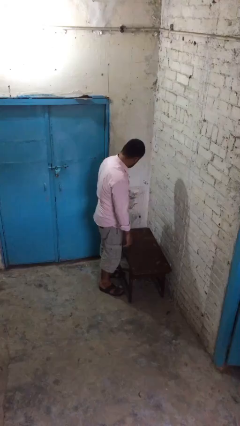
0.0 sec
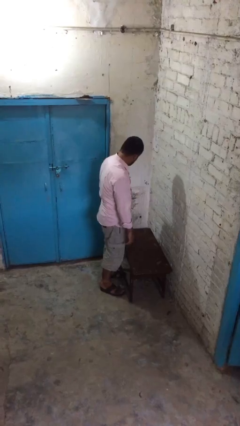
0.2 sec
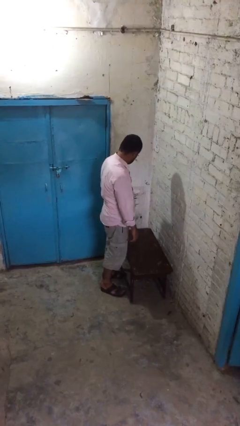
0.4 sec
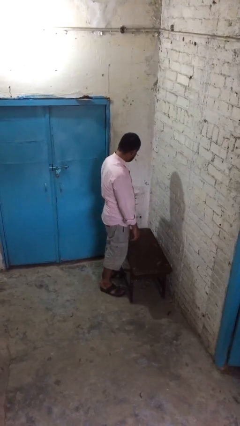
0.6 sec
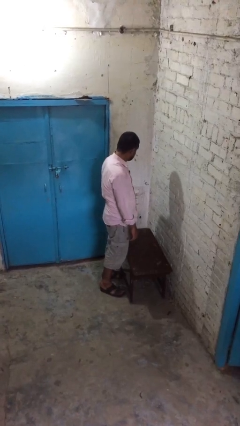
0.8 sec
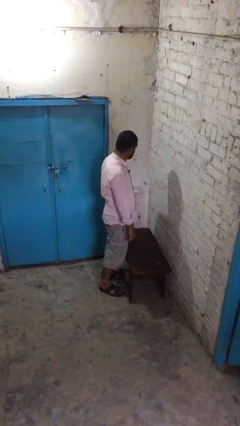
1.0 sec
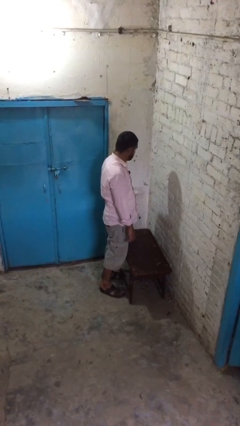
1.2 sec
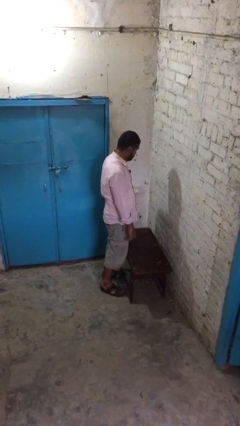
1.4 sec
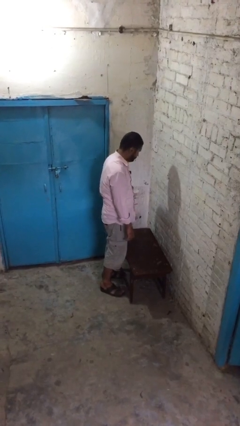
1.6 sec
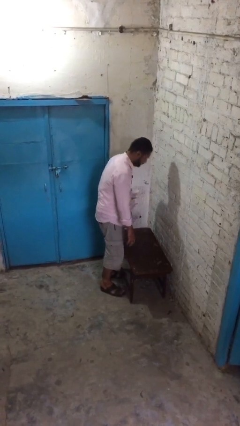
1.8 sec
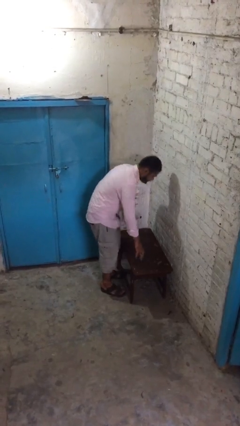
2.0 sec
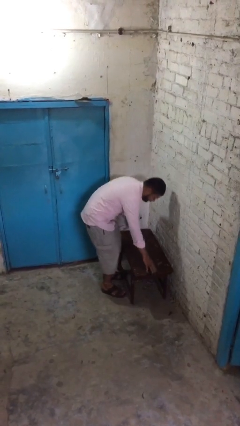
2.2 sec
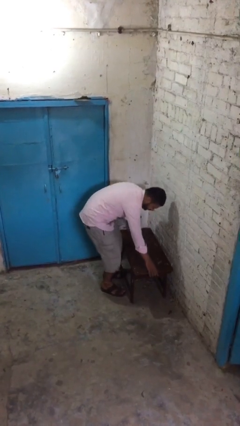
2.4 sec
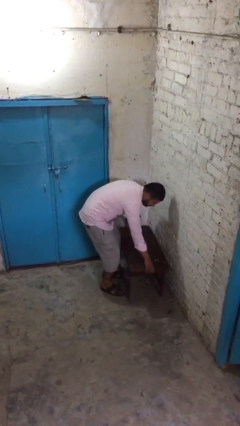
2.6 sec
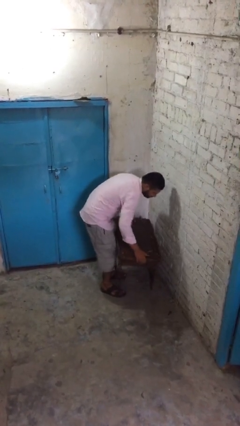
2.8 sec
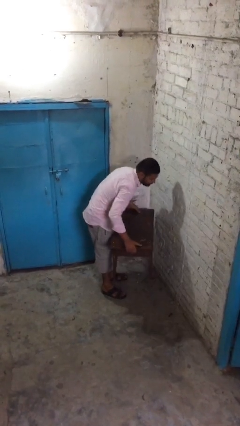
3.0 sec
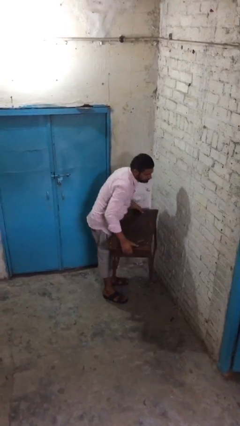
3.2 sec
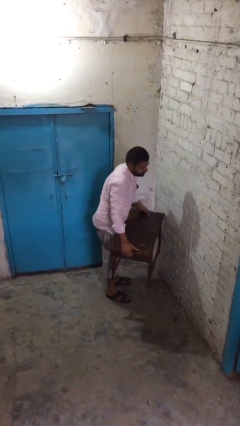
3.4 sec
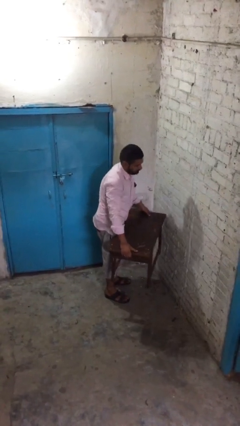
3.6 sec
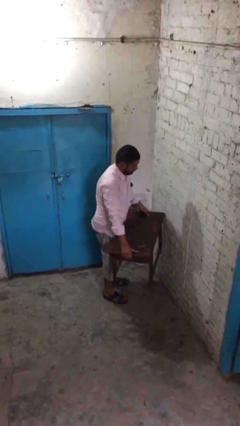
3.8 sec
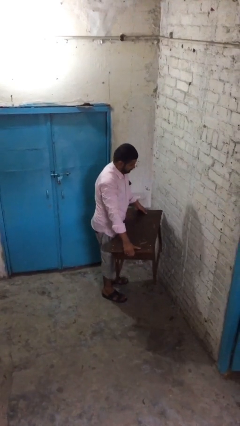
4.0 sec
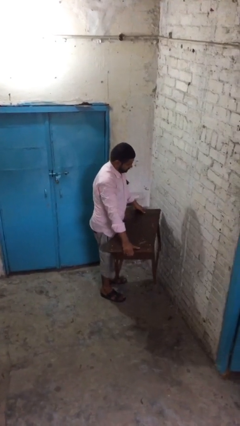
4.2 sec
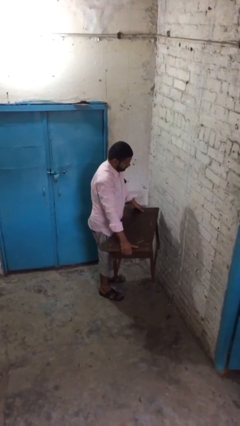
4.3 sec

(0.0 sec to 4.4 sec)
person picks up object from floor

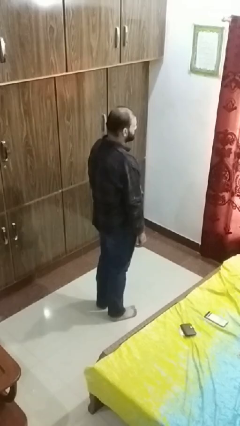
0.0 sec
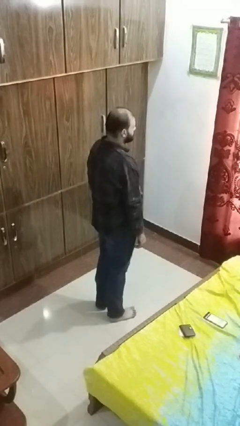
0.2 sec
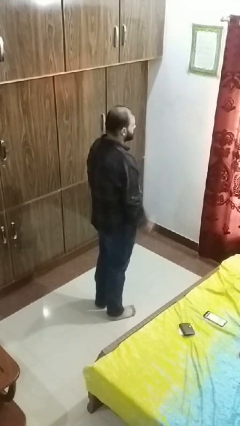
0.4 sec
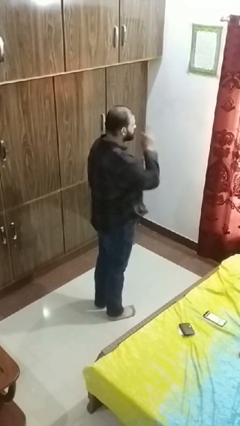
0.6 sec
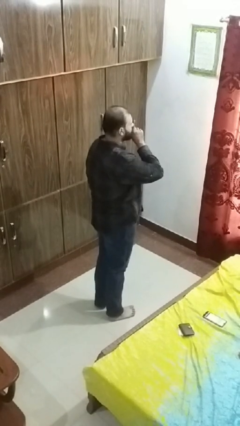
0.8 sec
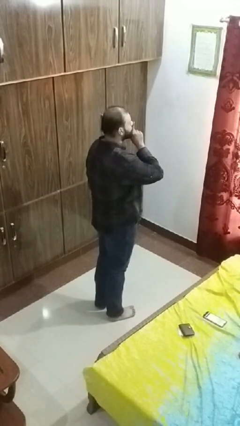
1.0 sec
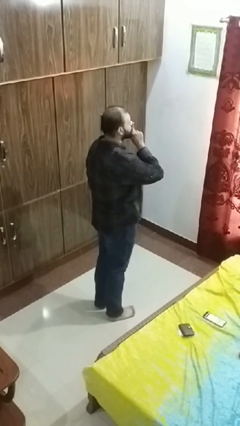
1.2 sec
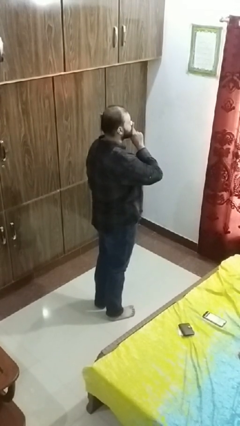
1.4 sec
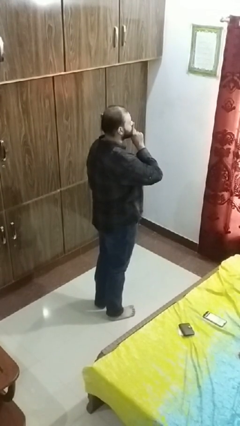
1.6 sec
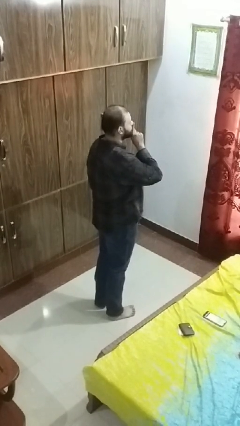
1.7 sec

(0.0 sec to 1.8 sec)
person gestures be quiet

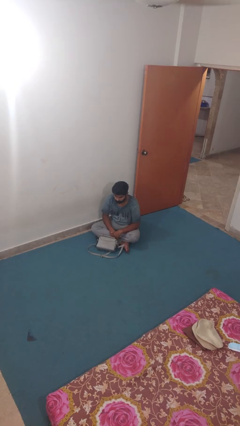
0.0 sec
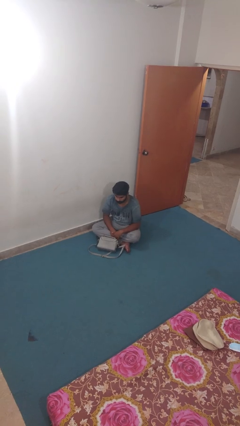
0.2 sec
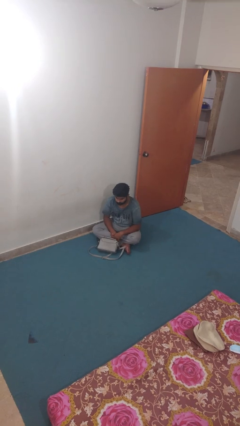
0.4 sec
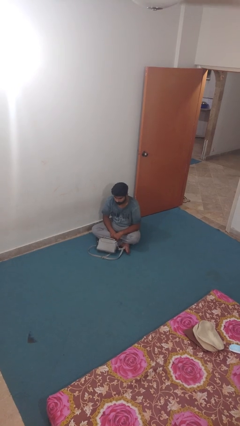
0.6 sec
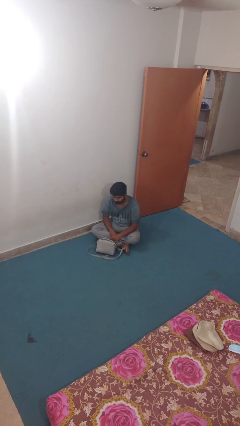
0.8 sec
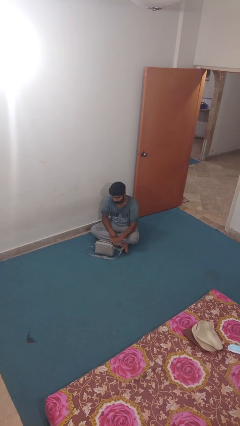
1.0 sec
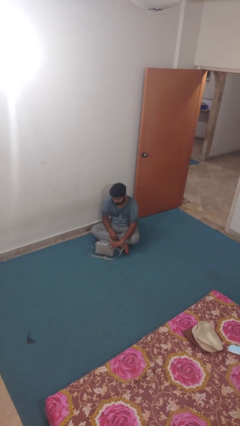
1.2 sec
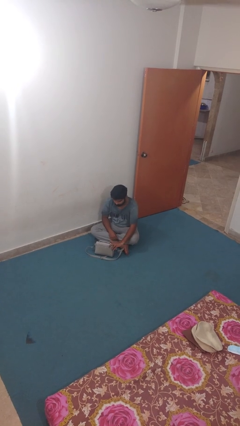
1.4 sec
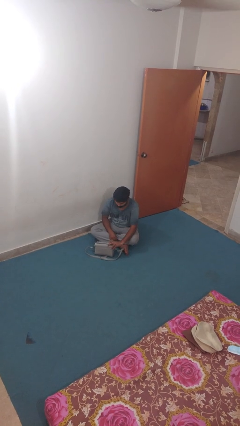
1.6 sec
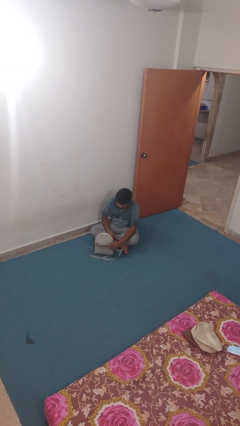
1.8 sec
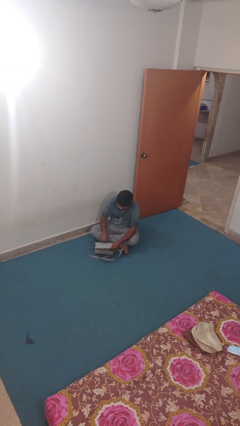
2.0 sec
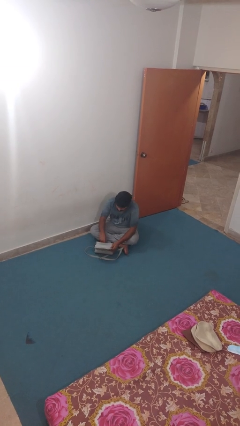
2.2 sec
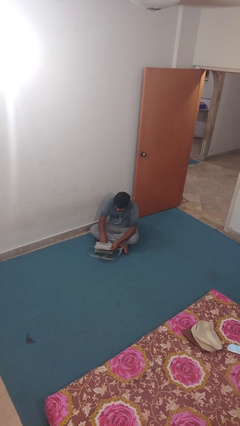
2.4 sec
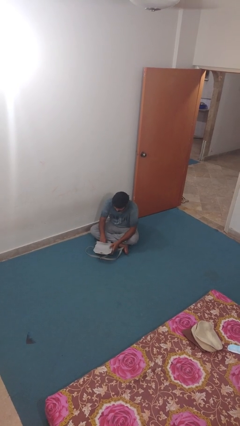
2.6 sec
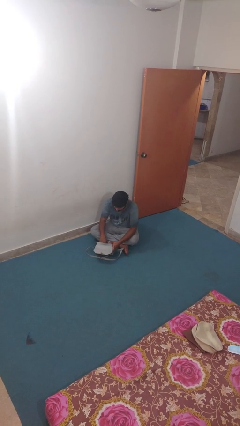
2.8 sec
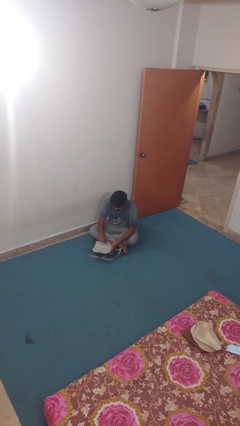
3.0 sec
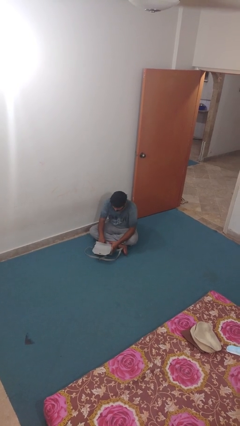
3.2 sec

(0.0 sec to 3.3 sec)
person searches in purse

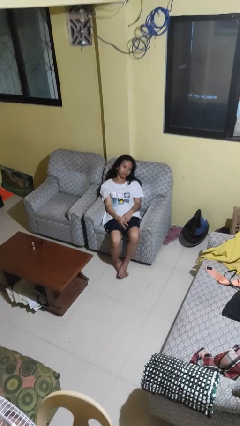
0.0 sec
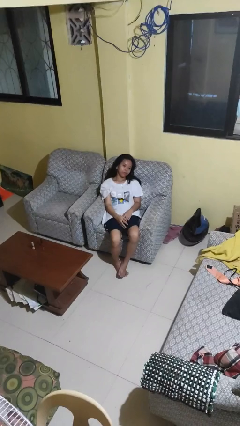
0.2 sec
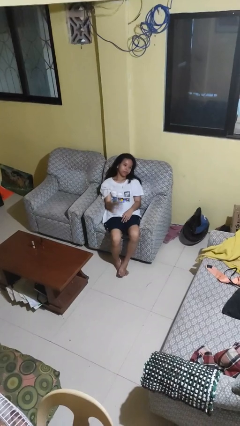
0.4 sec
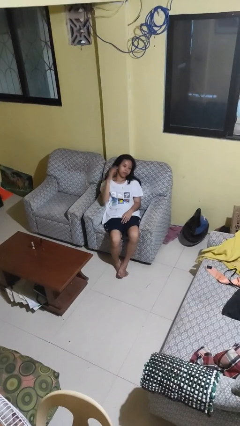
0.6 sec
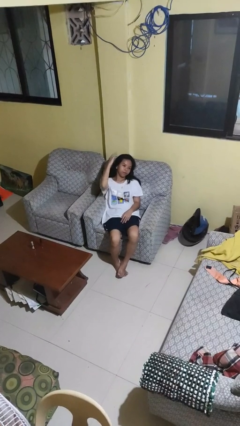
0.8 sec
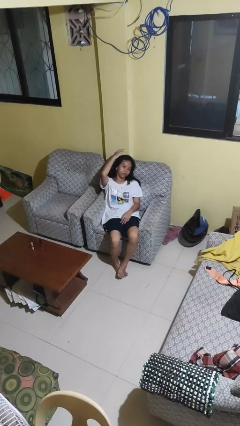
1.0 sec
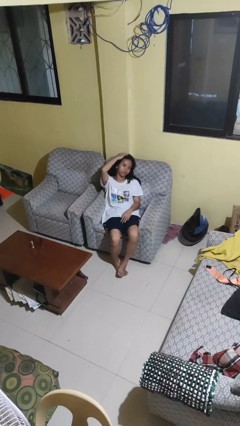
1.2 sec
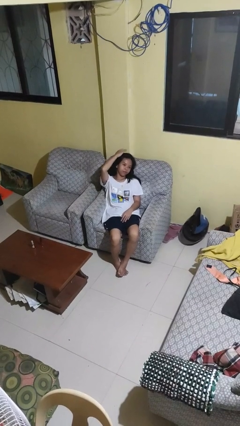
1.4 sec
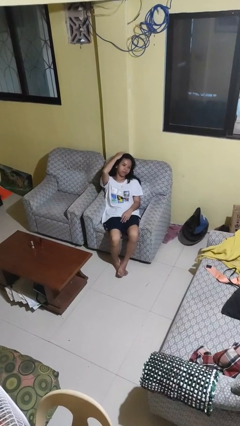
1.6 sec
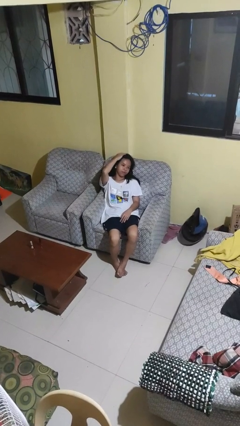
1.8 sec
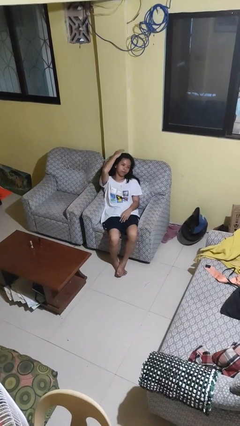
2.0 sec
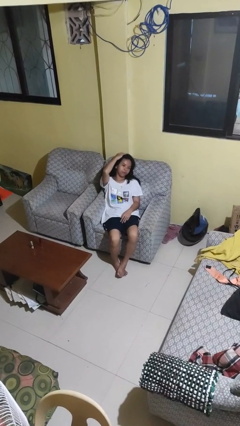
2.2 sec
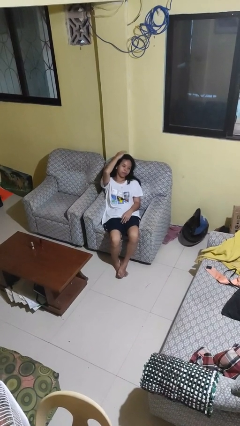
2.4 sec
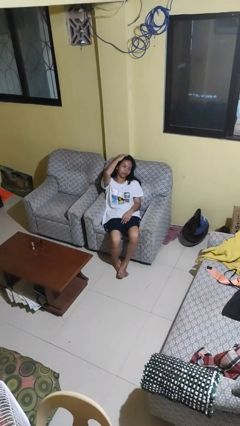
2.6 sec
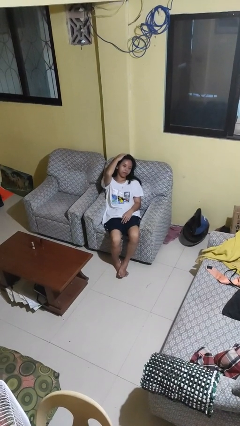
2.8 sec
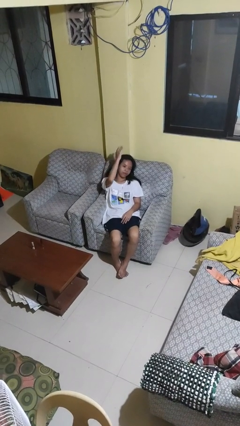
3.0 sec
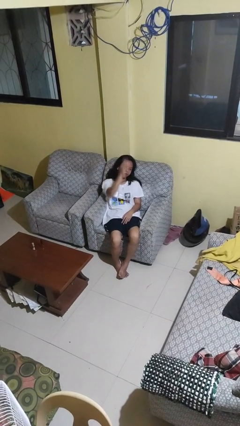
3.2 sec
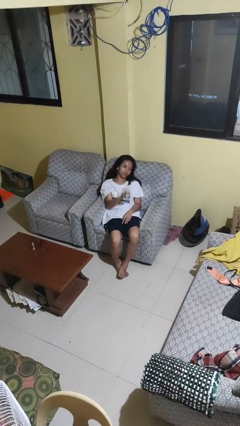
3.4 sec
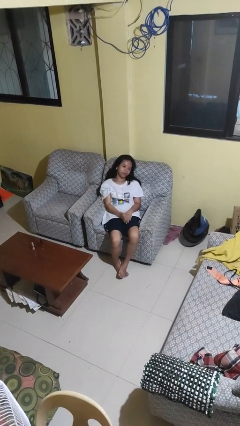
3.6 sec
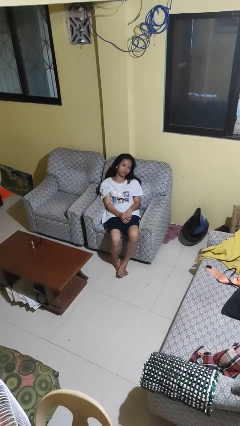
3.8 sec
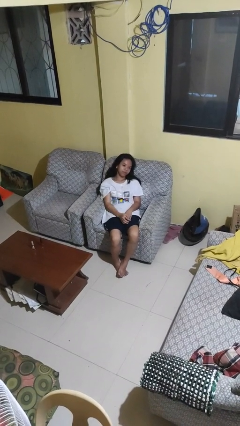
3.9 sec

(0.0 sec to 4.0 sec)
person pats head

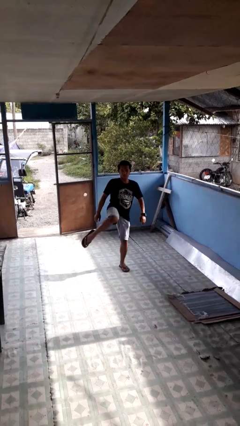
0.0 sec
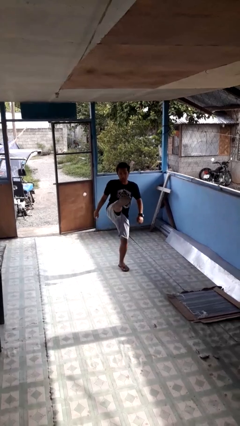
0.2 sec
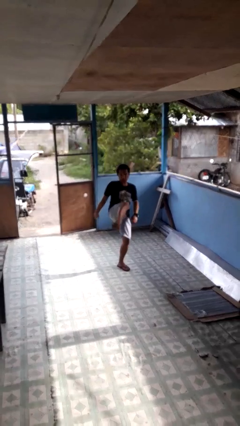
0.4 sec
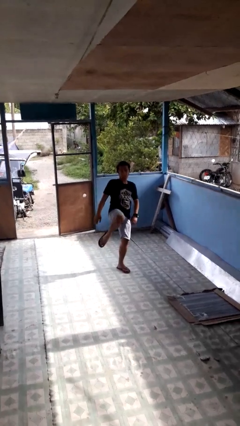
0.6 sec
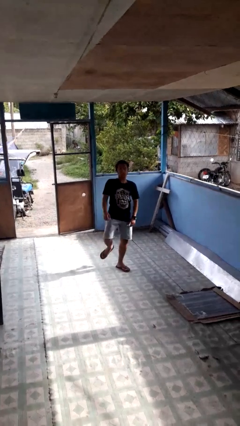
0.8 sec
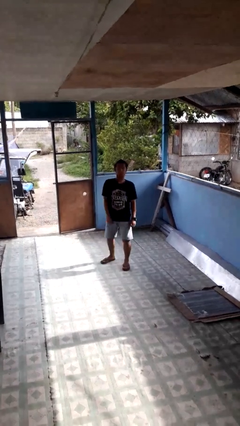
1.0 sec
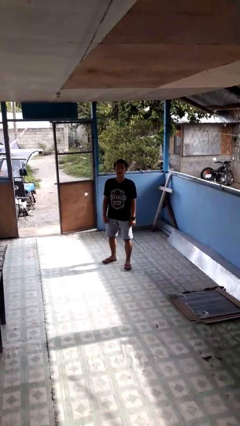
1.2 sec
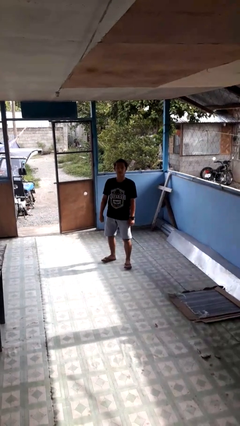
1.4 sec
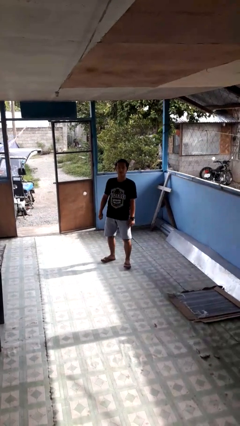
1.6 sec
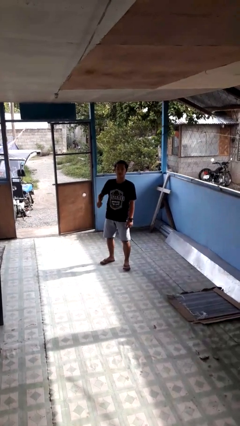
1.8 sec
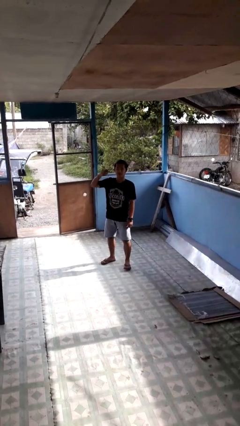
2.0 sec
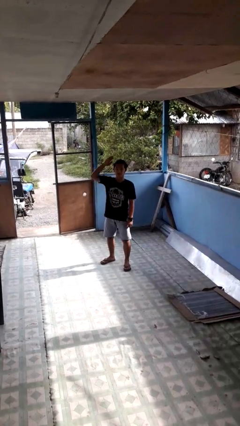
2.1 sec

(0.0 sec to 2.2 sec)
person karate kicks

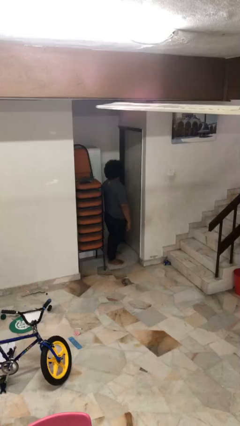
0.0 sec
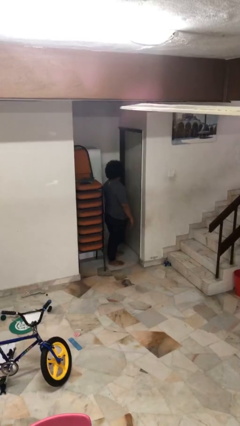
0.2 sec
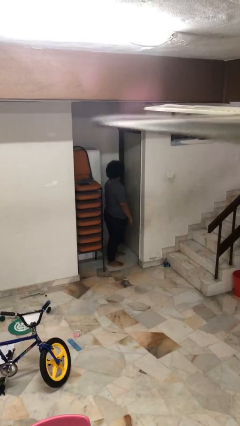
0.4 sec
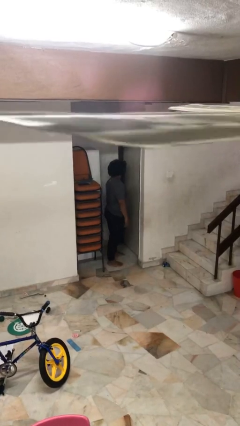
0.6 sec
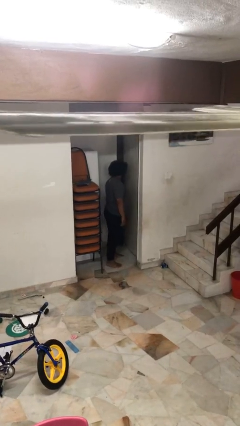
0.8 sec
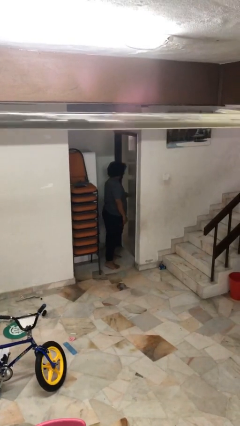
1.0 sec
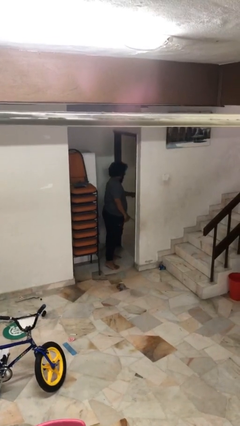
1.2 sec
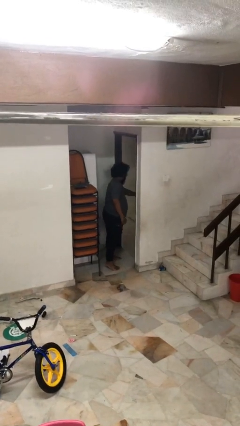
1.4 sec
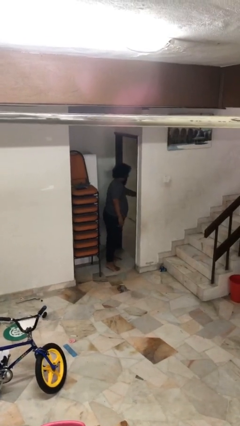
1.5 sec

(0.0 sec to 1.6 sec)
person opens facility door

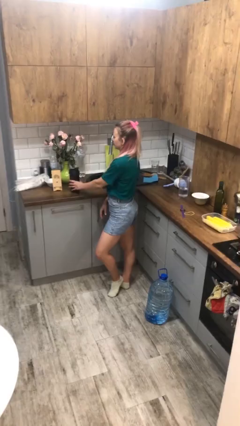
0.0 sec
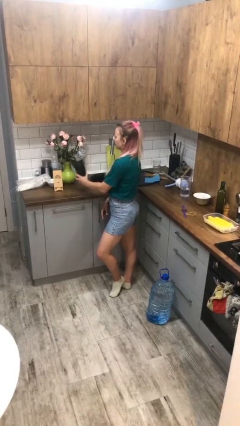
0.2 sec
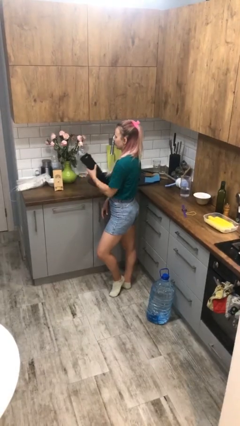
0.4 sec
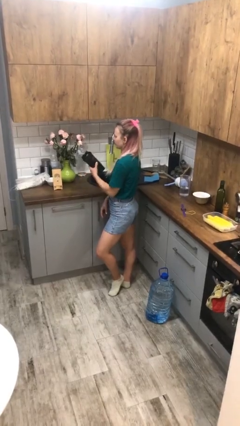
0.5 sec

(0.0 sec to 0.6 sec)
person picks up object from countertop
